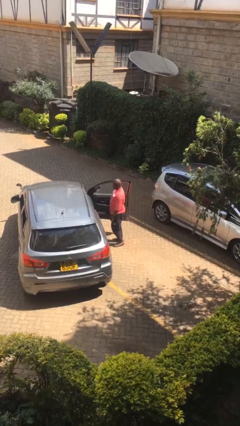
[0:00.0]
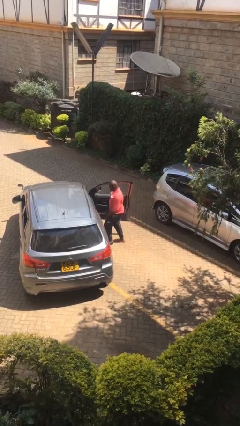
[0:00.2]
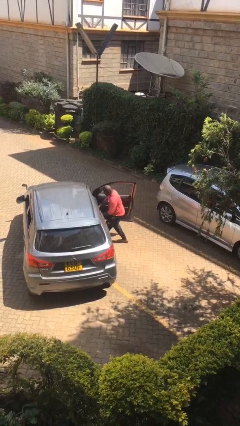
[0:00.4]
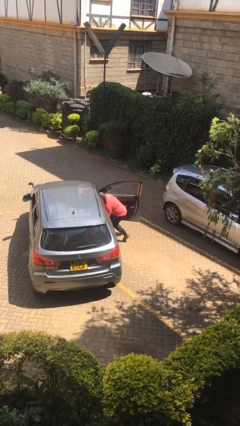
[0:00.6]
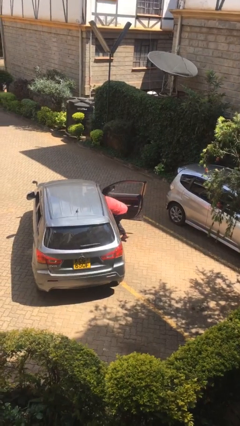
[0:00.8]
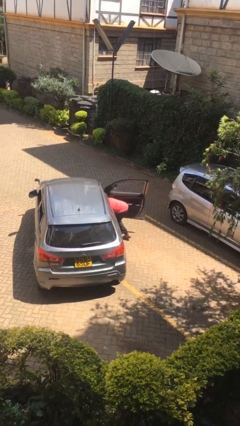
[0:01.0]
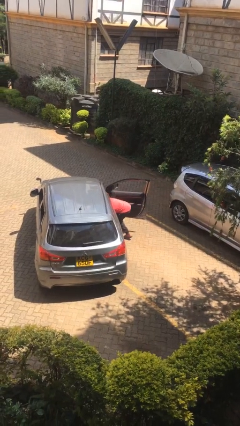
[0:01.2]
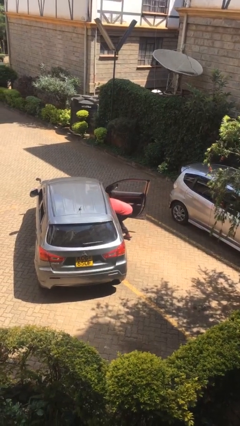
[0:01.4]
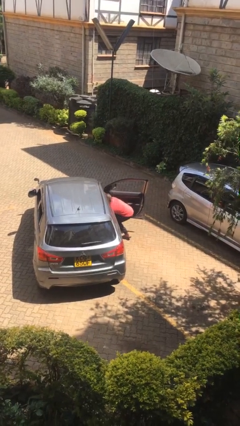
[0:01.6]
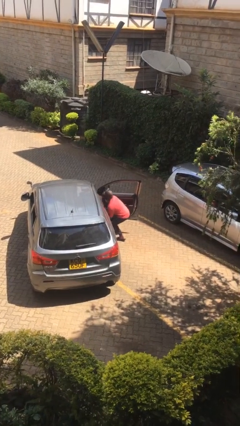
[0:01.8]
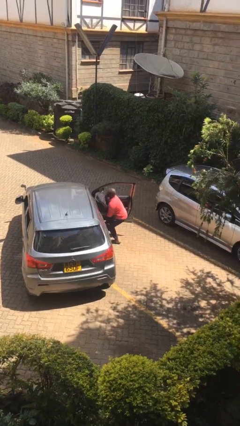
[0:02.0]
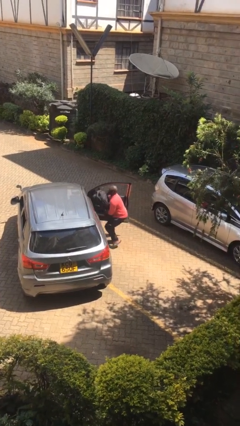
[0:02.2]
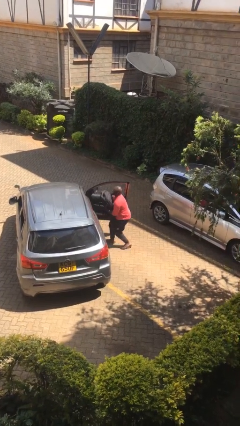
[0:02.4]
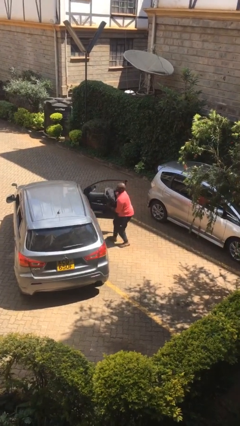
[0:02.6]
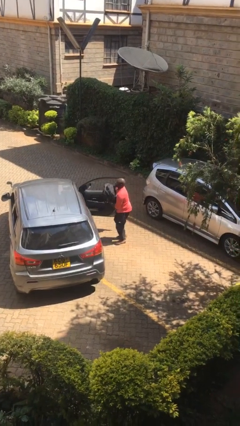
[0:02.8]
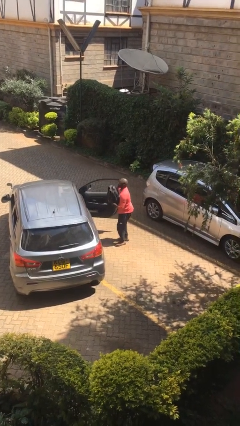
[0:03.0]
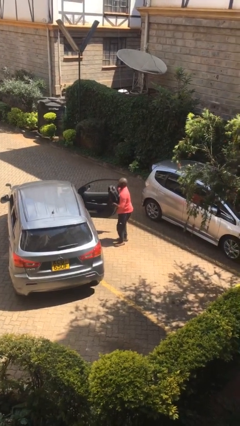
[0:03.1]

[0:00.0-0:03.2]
person unloads car

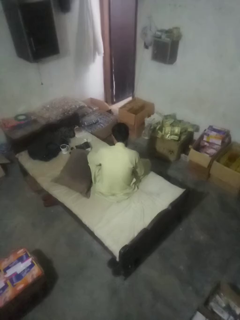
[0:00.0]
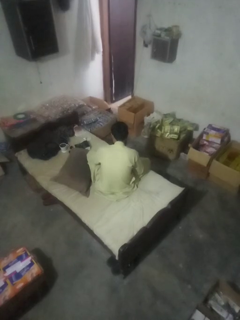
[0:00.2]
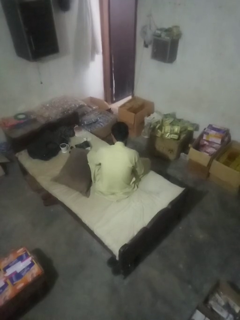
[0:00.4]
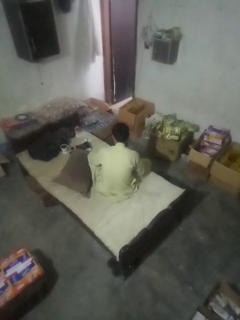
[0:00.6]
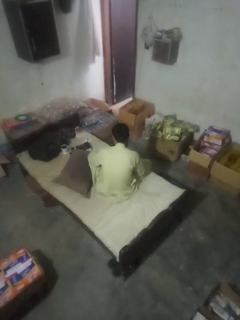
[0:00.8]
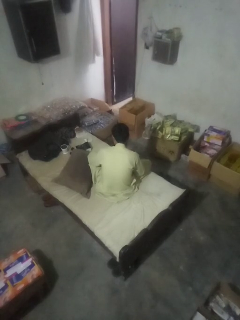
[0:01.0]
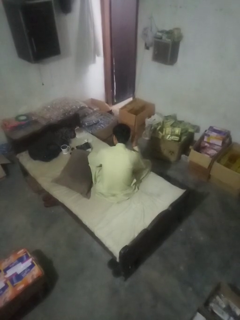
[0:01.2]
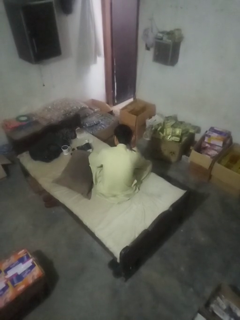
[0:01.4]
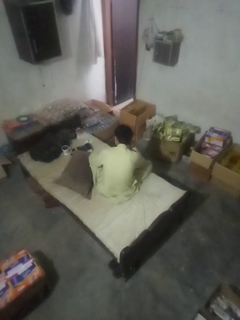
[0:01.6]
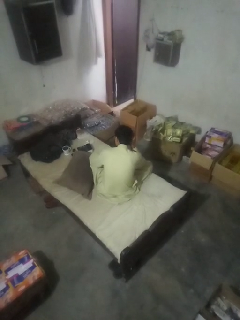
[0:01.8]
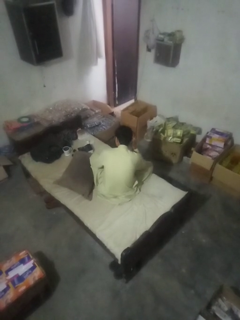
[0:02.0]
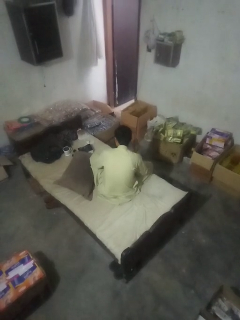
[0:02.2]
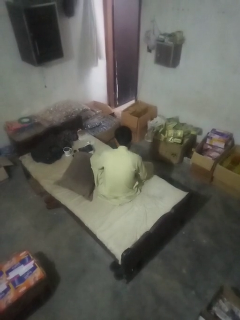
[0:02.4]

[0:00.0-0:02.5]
person gestures listen closely

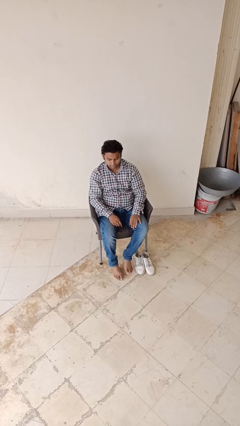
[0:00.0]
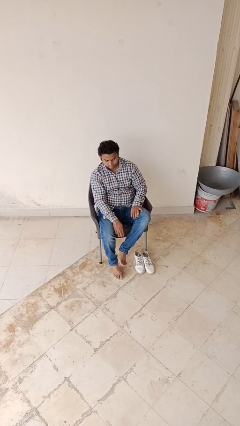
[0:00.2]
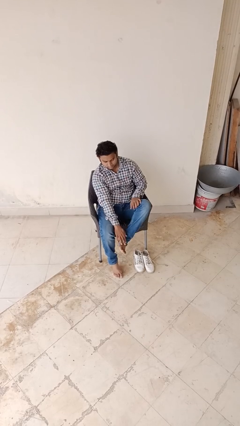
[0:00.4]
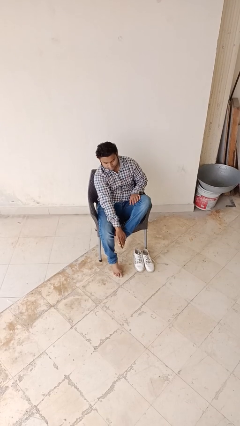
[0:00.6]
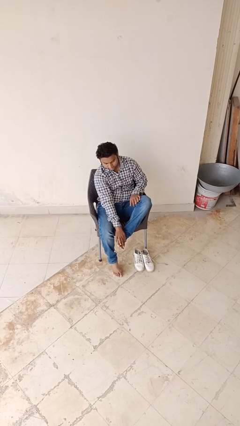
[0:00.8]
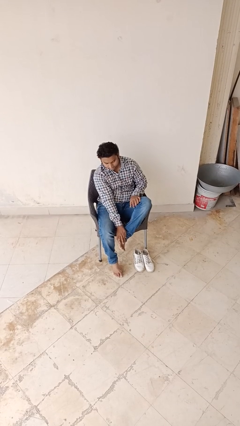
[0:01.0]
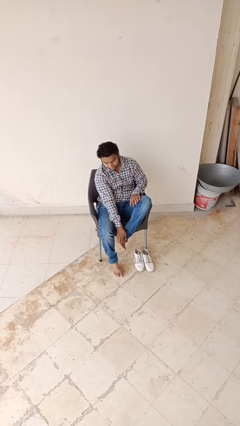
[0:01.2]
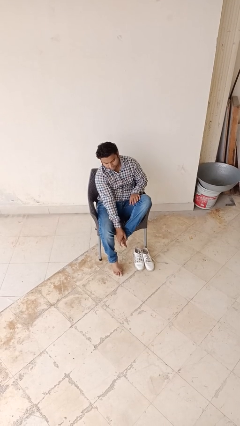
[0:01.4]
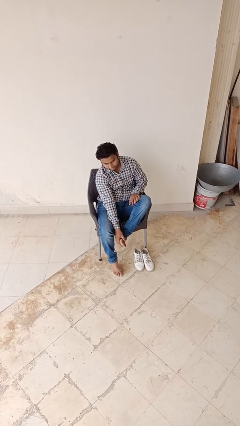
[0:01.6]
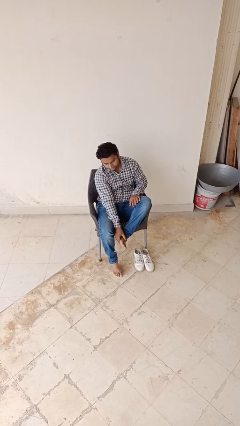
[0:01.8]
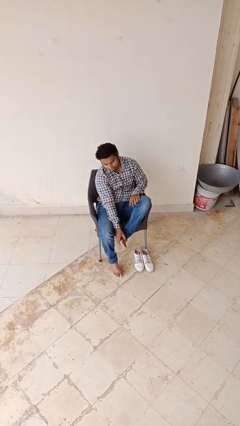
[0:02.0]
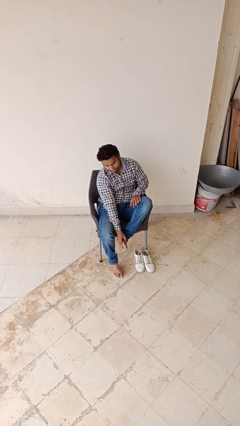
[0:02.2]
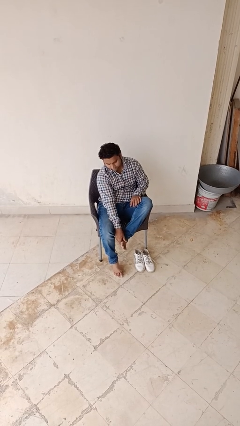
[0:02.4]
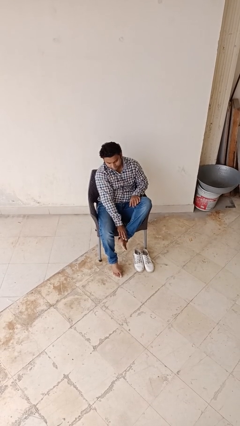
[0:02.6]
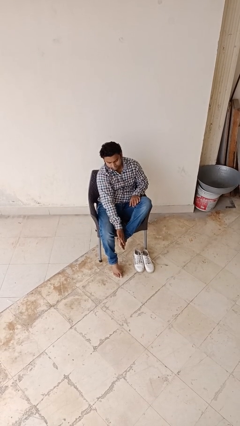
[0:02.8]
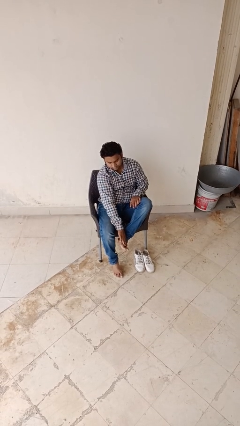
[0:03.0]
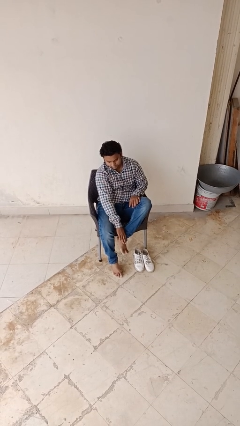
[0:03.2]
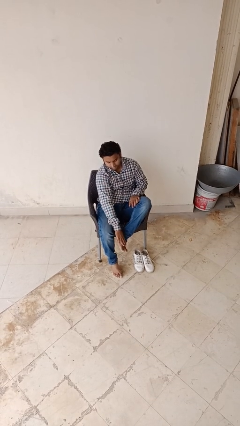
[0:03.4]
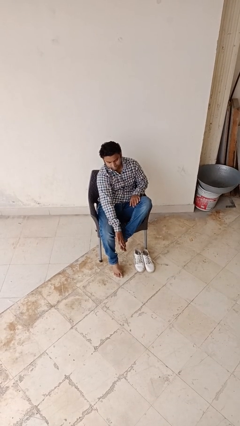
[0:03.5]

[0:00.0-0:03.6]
person rubs foot

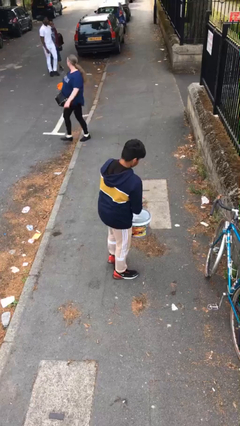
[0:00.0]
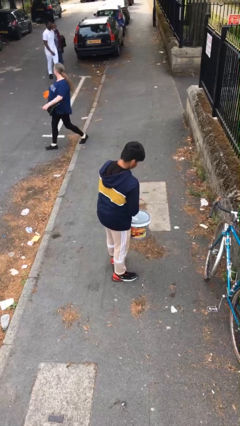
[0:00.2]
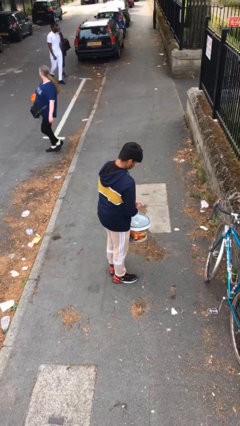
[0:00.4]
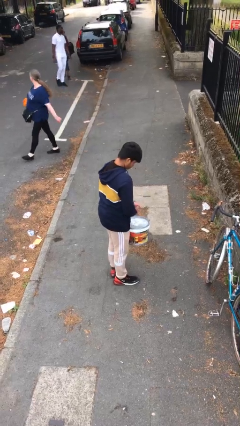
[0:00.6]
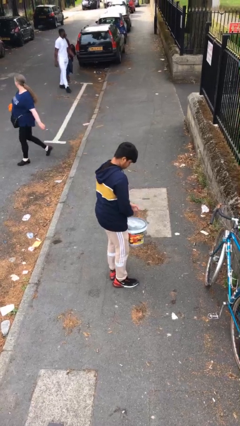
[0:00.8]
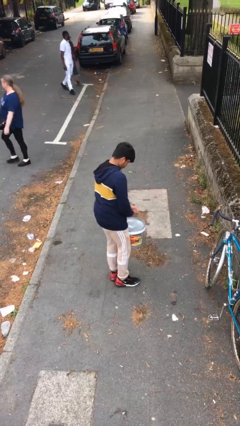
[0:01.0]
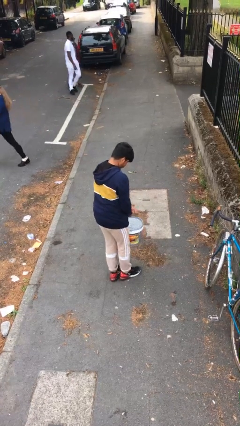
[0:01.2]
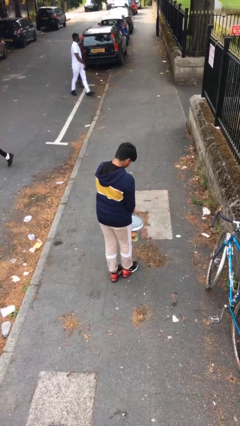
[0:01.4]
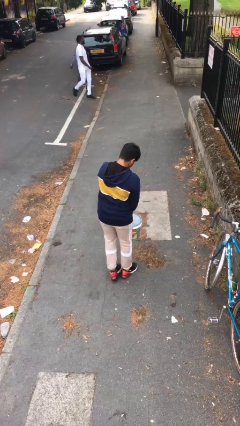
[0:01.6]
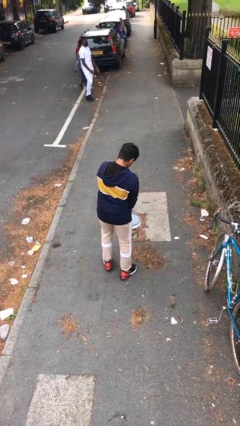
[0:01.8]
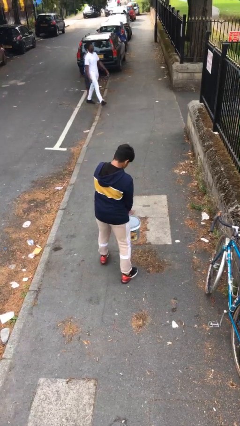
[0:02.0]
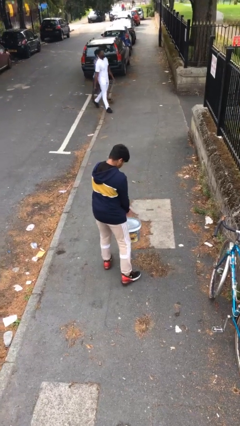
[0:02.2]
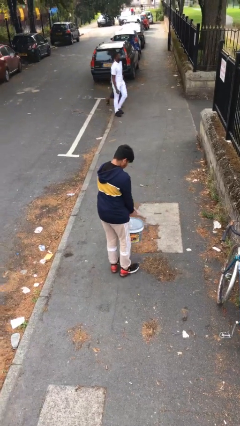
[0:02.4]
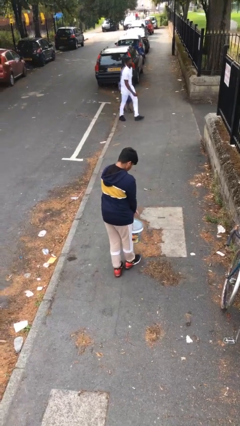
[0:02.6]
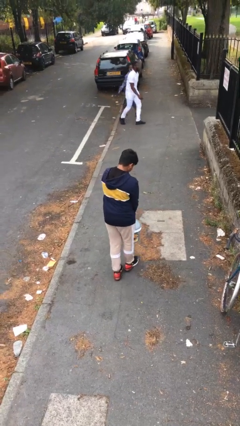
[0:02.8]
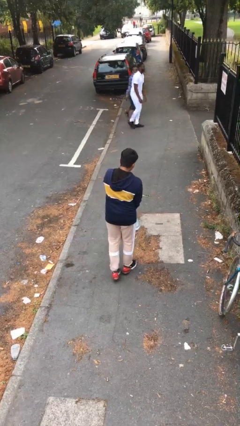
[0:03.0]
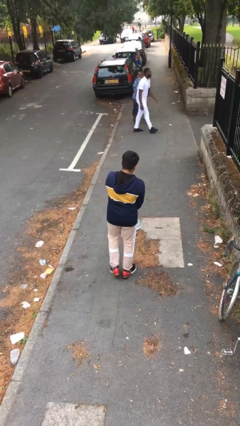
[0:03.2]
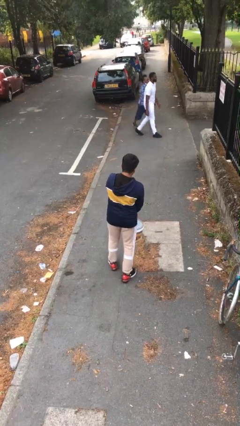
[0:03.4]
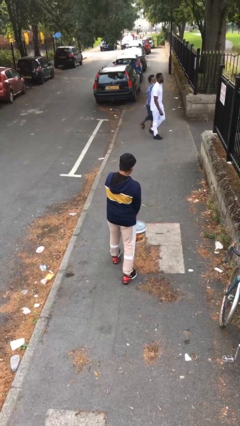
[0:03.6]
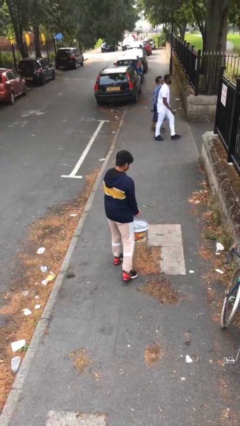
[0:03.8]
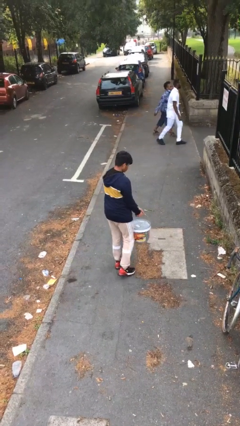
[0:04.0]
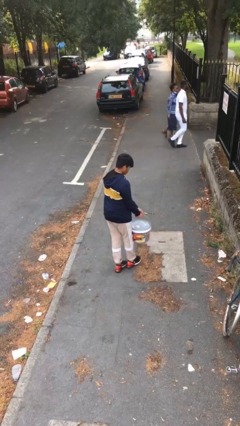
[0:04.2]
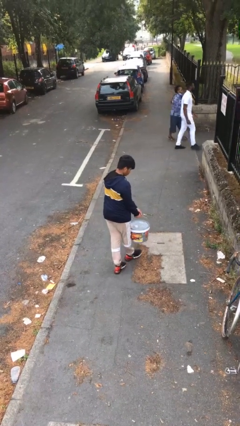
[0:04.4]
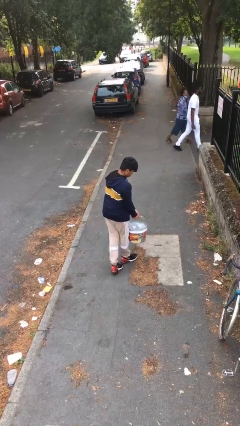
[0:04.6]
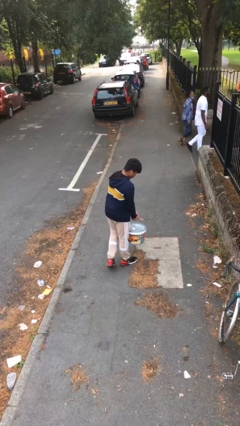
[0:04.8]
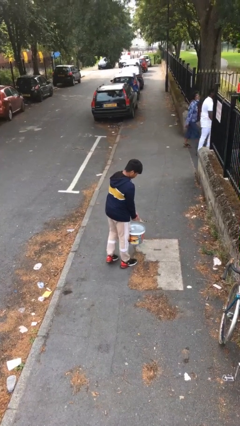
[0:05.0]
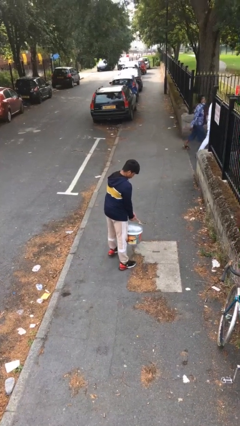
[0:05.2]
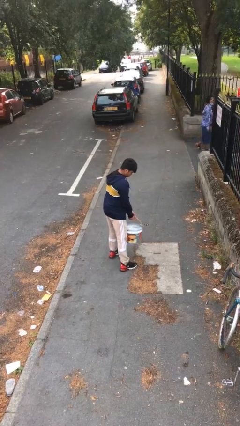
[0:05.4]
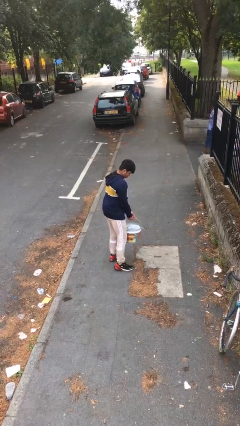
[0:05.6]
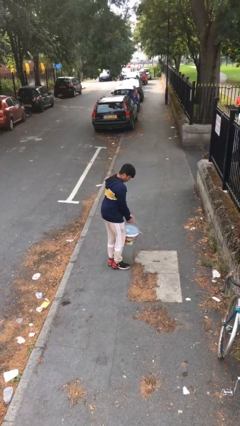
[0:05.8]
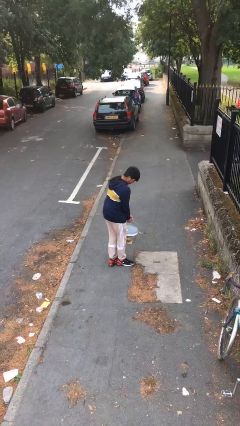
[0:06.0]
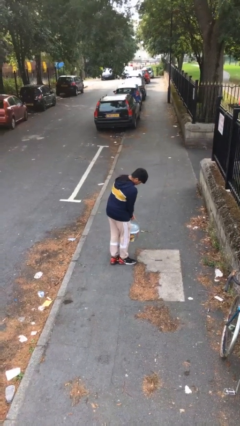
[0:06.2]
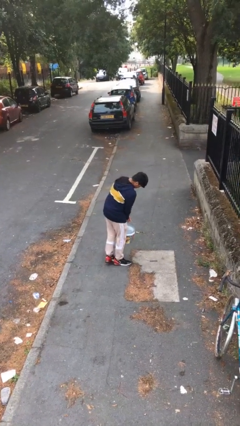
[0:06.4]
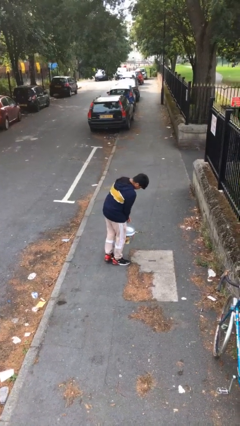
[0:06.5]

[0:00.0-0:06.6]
person carries heavy object

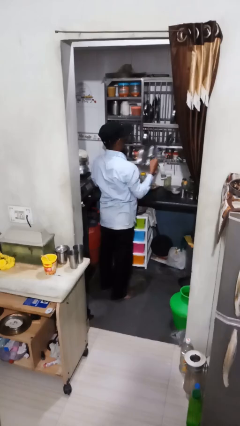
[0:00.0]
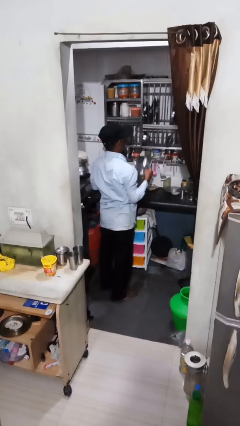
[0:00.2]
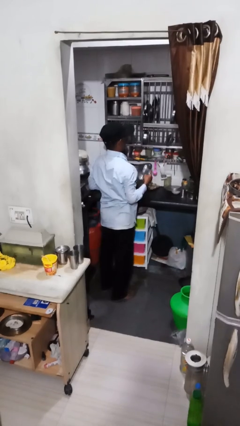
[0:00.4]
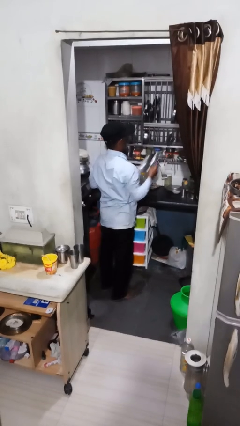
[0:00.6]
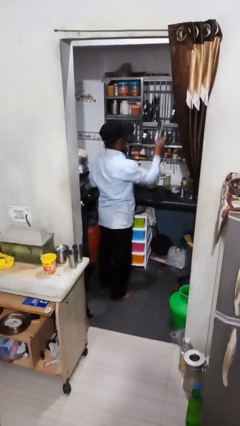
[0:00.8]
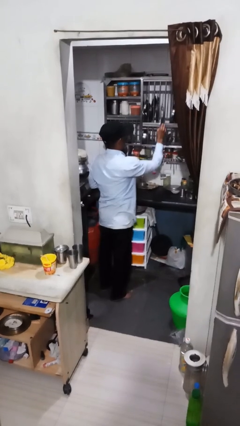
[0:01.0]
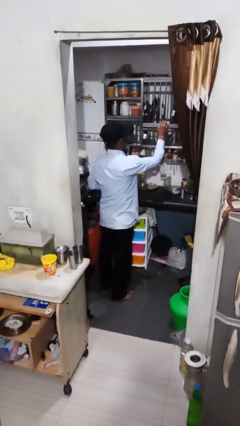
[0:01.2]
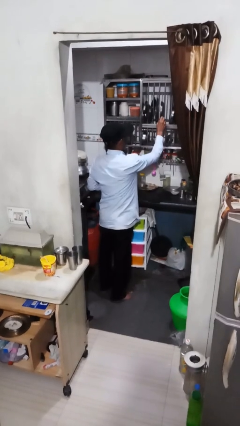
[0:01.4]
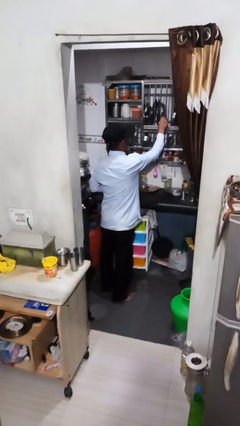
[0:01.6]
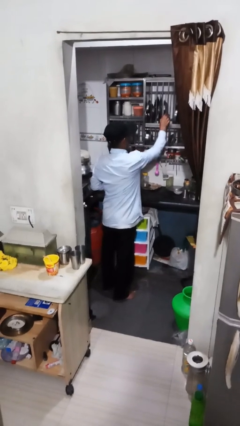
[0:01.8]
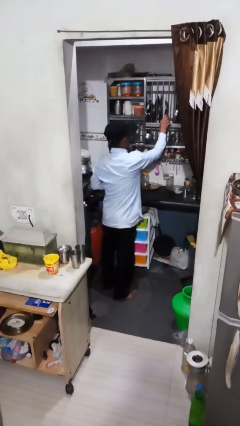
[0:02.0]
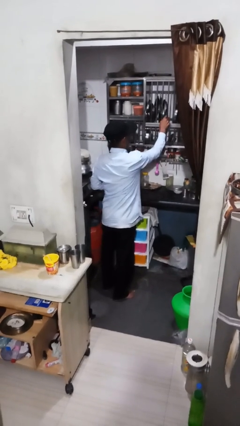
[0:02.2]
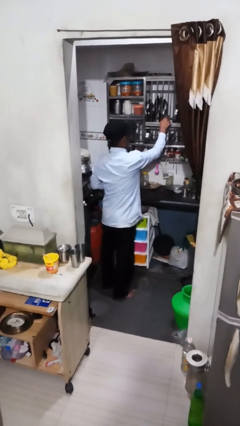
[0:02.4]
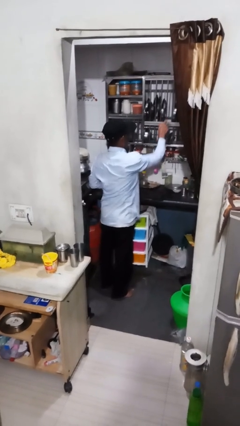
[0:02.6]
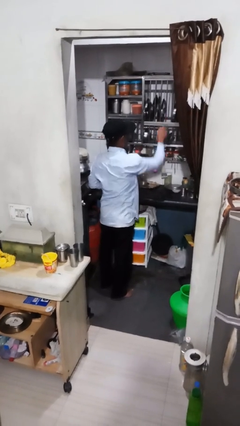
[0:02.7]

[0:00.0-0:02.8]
person puts object in cabinet
